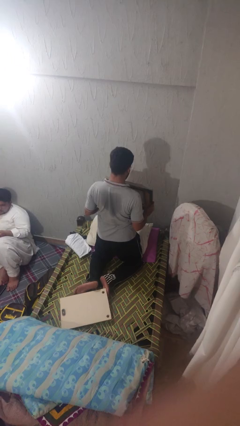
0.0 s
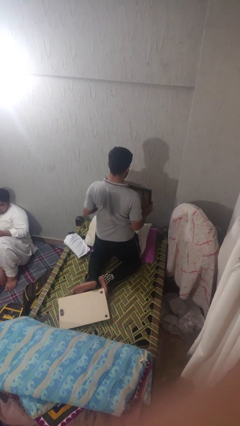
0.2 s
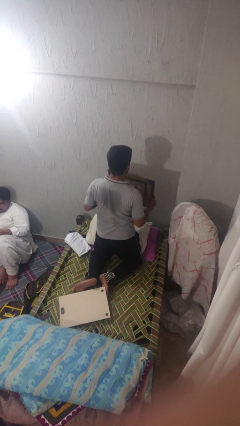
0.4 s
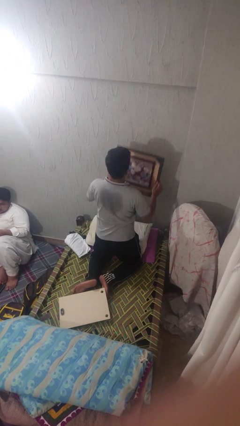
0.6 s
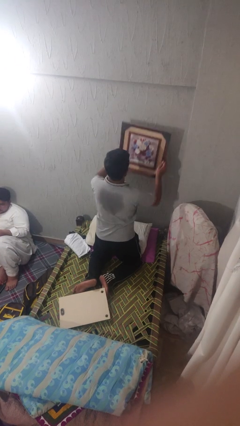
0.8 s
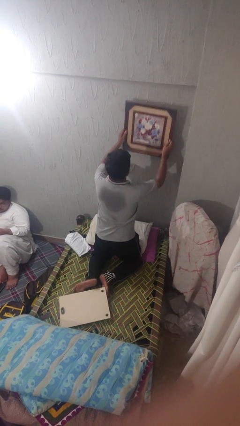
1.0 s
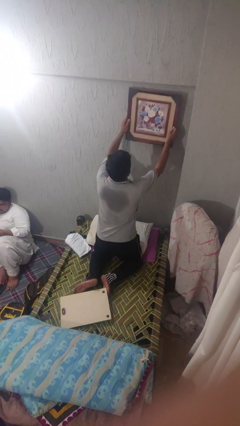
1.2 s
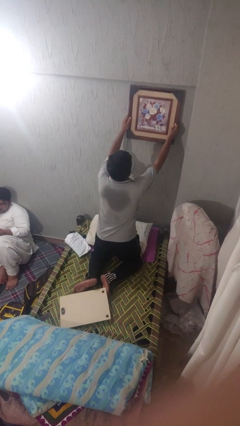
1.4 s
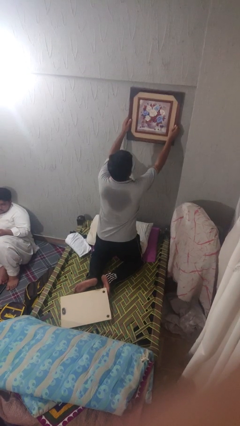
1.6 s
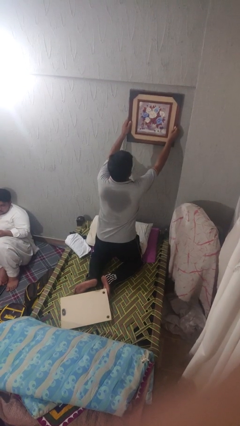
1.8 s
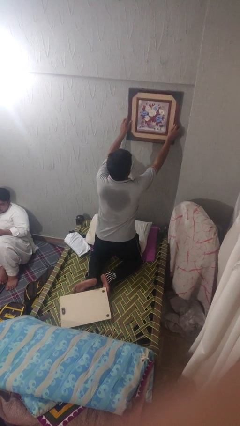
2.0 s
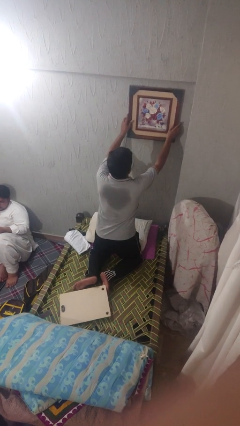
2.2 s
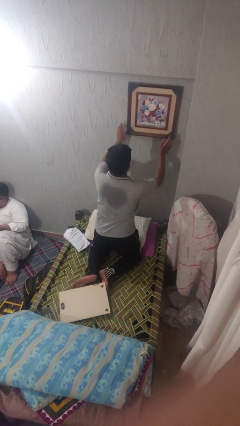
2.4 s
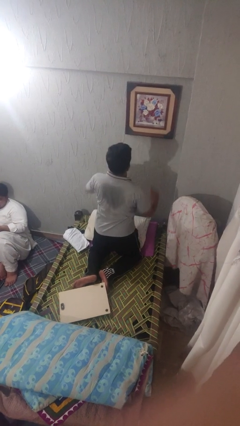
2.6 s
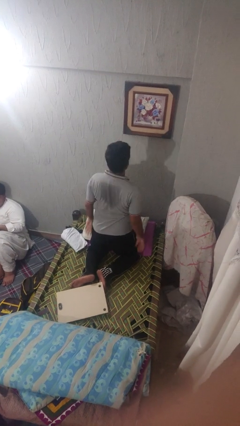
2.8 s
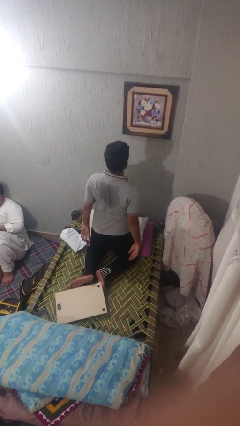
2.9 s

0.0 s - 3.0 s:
person puts up picture frame

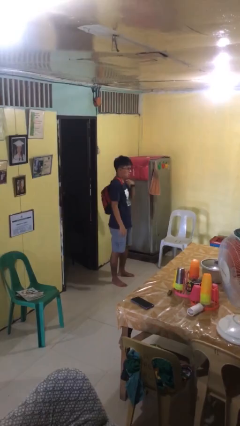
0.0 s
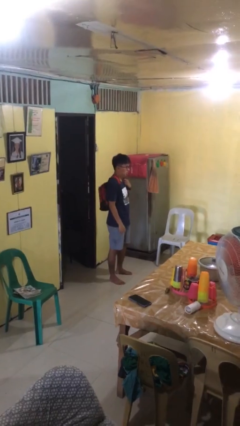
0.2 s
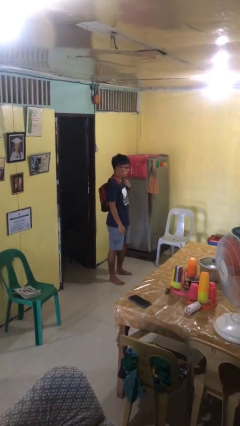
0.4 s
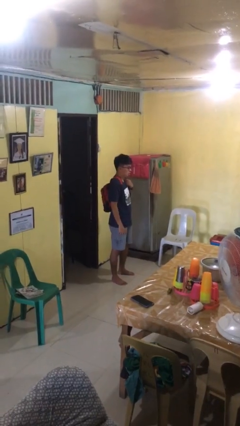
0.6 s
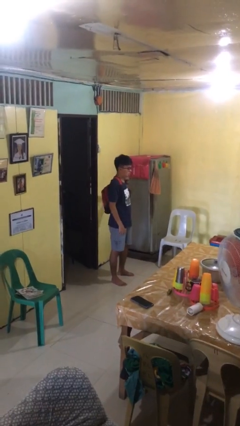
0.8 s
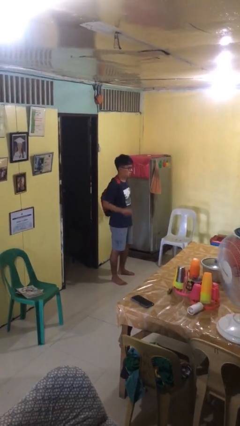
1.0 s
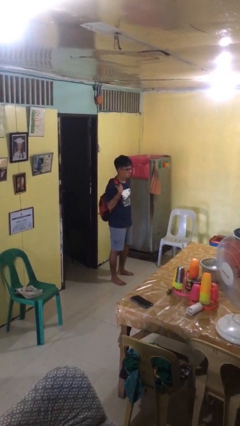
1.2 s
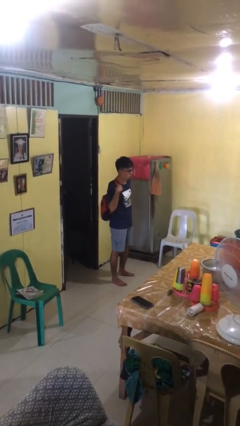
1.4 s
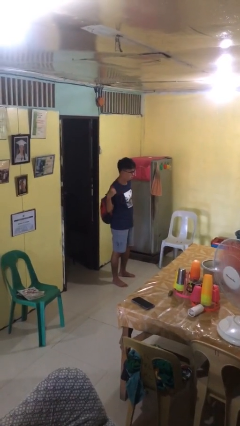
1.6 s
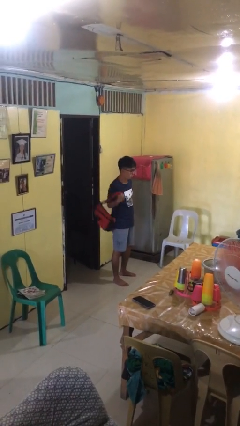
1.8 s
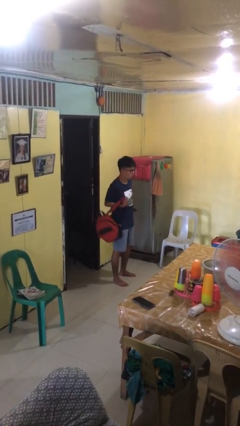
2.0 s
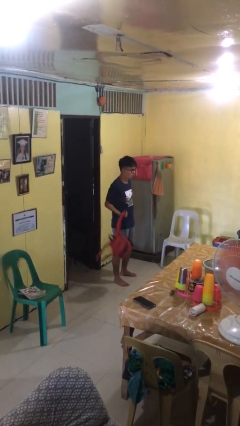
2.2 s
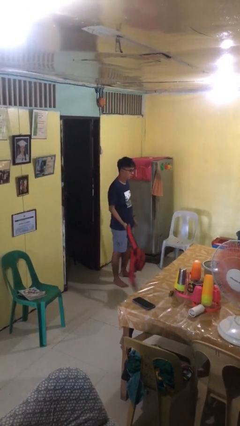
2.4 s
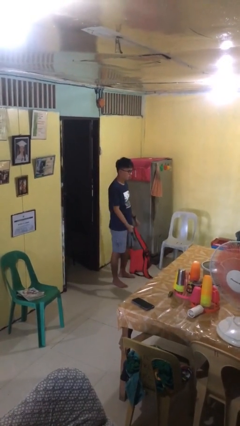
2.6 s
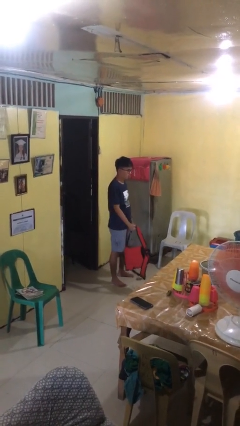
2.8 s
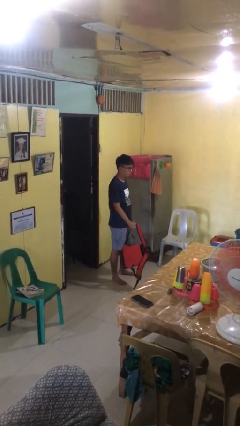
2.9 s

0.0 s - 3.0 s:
person takes off backpack

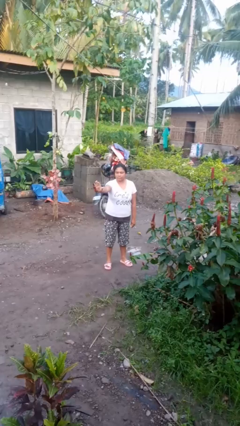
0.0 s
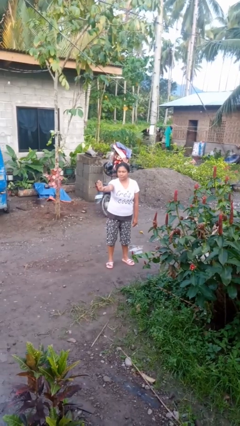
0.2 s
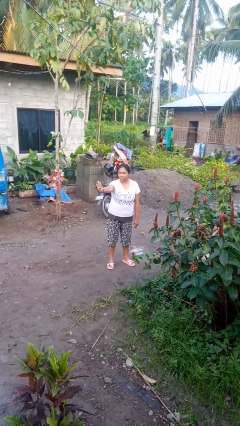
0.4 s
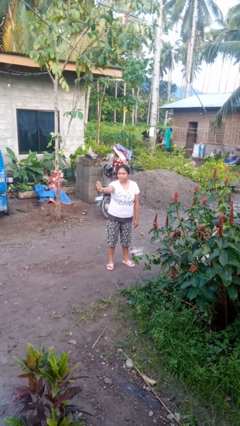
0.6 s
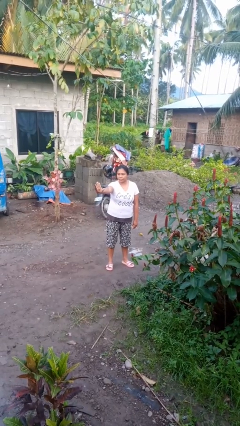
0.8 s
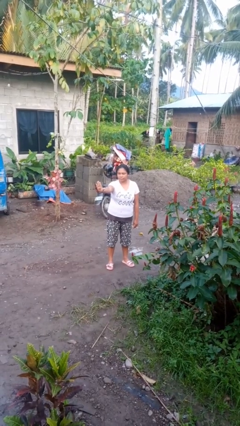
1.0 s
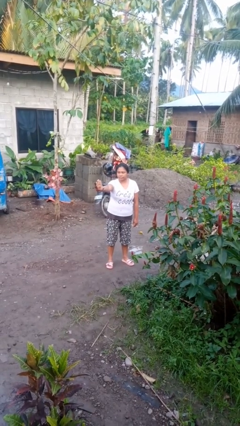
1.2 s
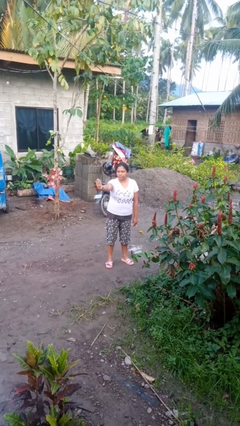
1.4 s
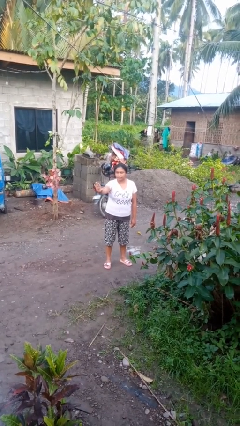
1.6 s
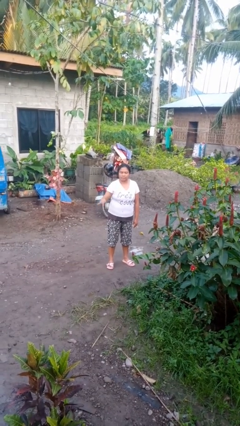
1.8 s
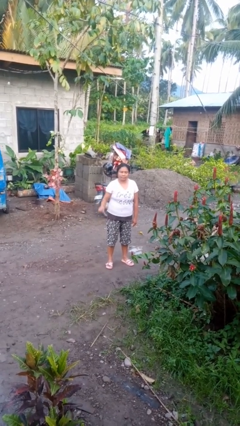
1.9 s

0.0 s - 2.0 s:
person gestures stop

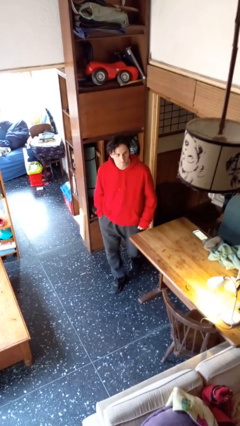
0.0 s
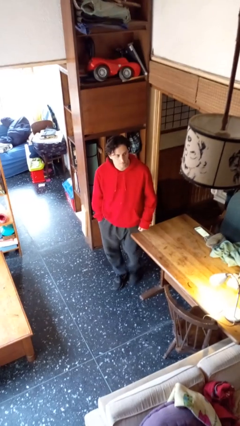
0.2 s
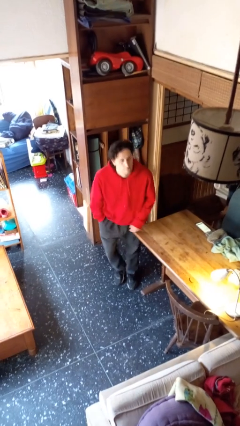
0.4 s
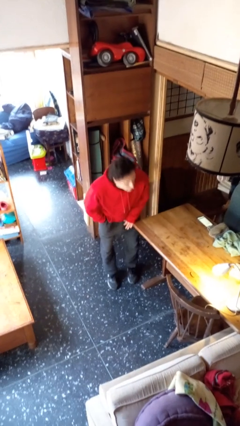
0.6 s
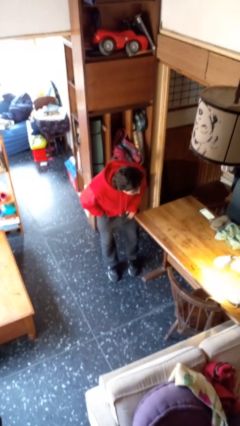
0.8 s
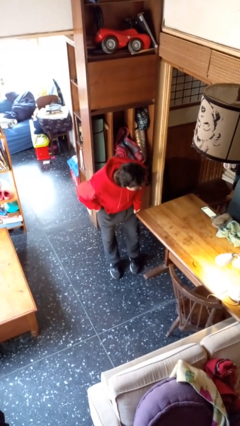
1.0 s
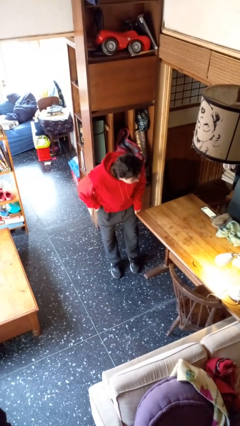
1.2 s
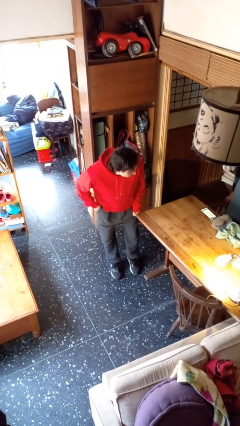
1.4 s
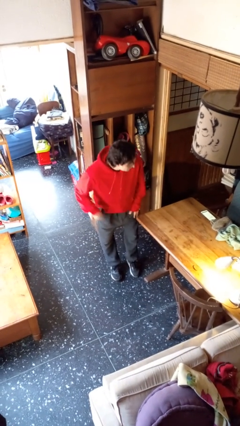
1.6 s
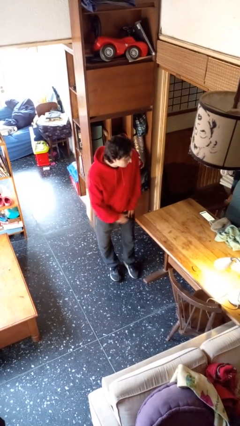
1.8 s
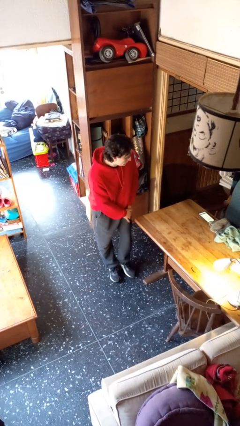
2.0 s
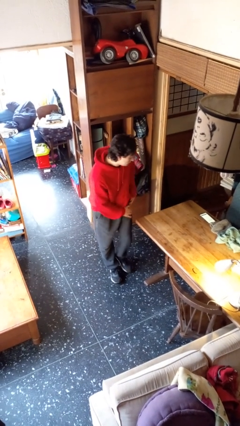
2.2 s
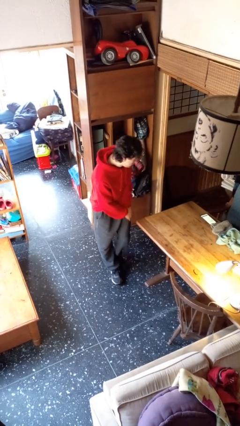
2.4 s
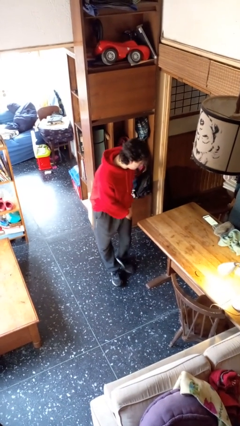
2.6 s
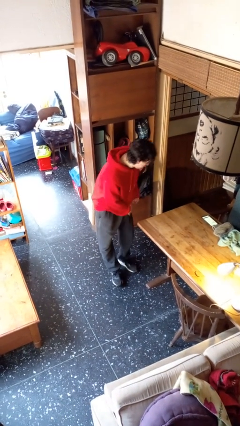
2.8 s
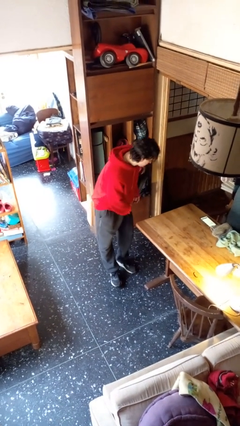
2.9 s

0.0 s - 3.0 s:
person bumps into table

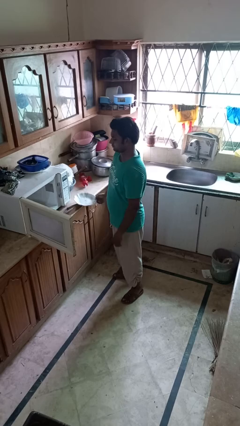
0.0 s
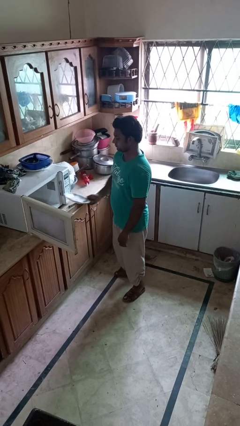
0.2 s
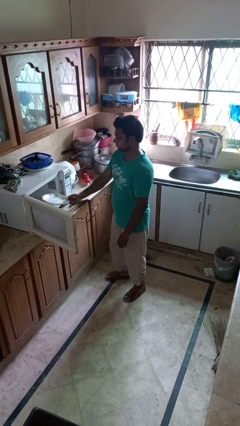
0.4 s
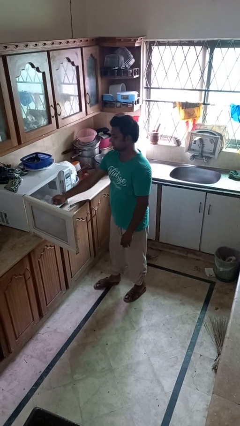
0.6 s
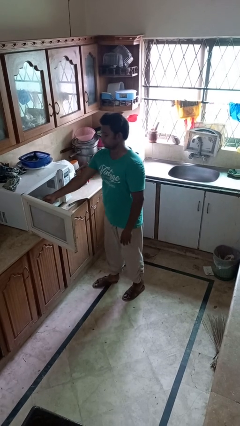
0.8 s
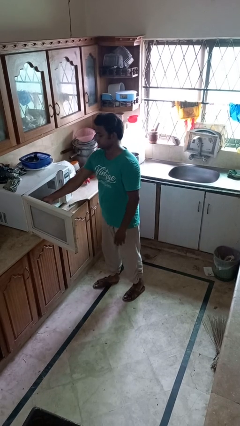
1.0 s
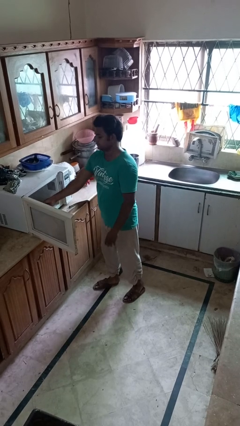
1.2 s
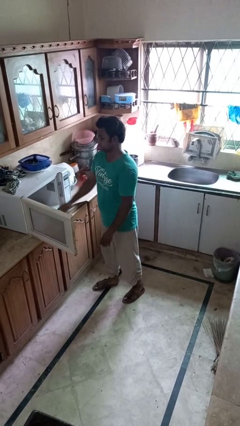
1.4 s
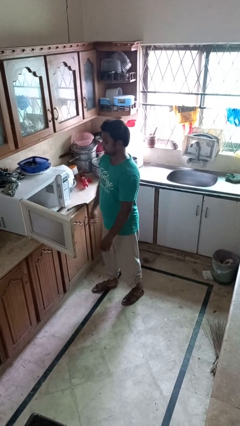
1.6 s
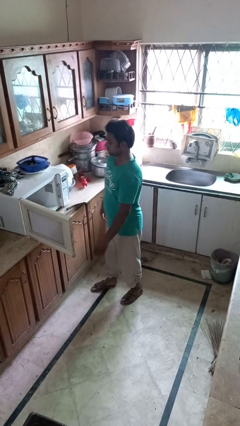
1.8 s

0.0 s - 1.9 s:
person puts object into microwave

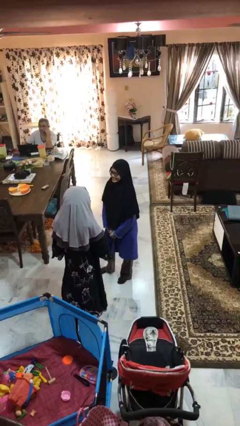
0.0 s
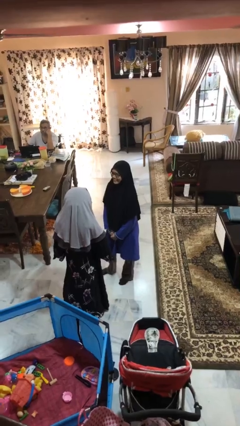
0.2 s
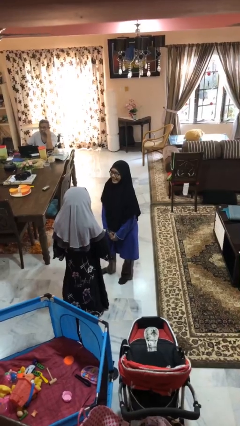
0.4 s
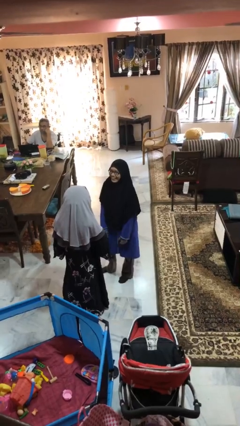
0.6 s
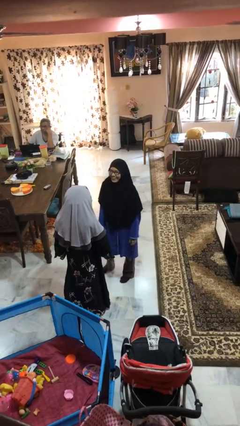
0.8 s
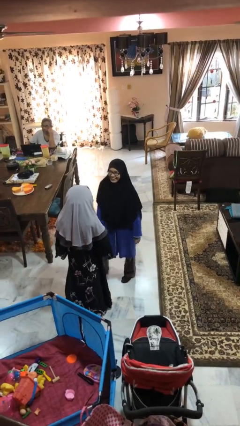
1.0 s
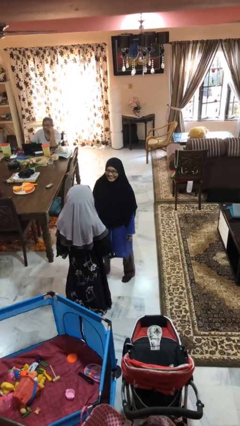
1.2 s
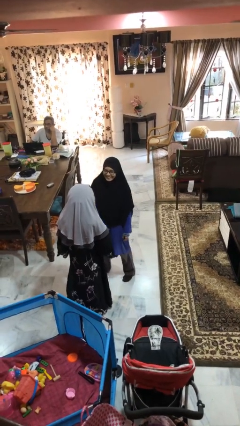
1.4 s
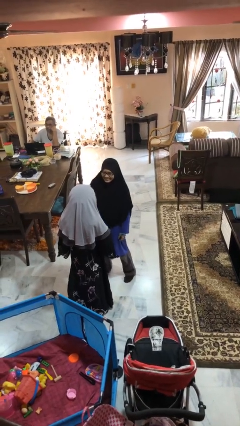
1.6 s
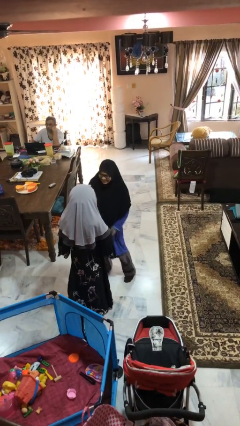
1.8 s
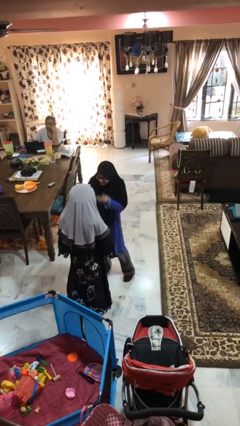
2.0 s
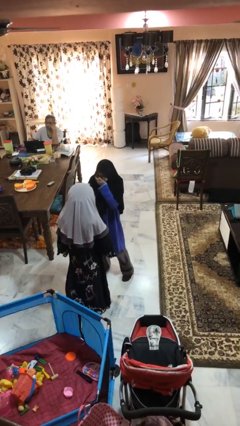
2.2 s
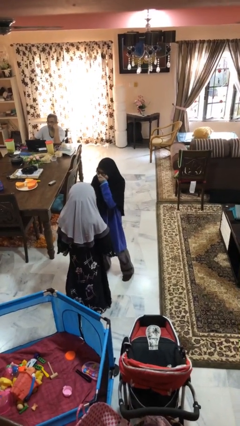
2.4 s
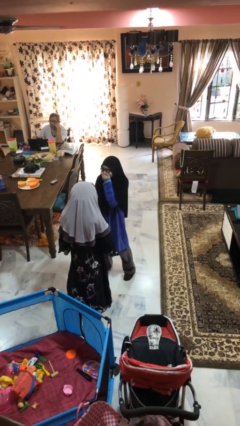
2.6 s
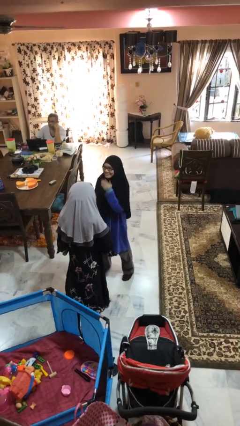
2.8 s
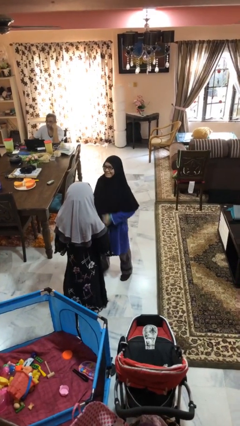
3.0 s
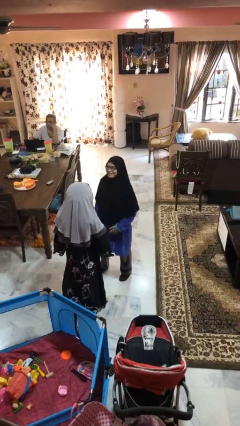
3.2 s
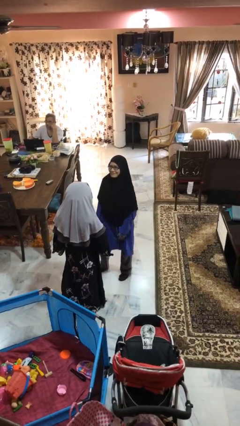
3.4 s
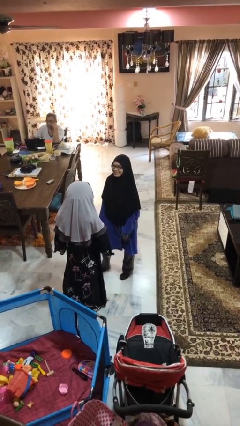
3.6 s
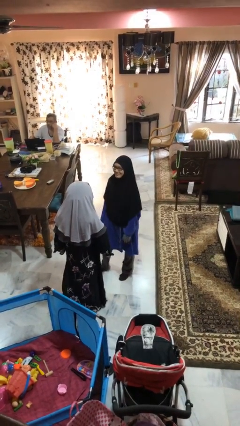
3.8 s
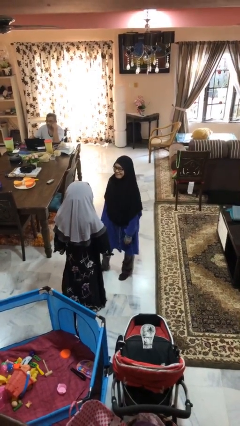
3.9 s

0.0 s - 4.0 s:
person laughs with person

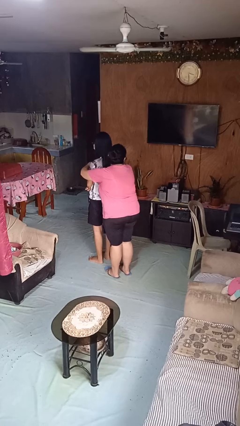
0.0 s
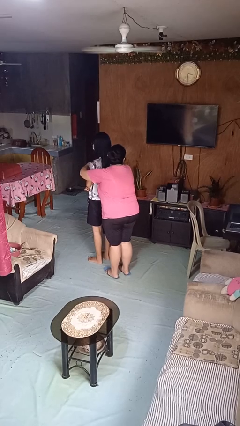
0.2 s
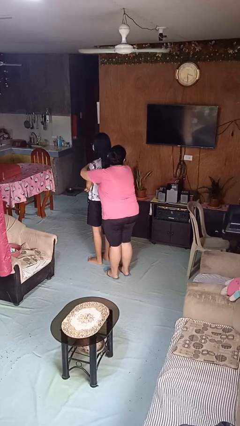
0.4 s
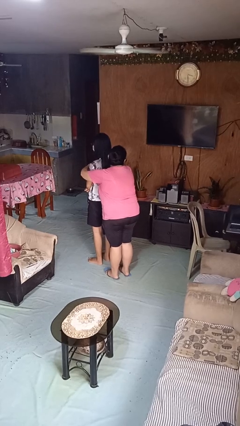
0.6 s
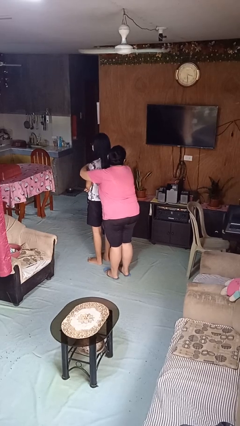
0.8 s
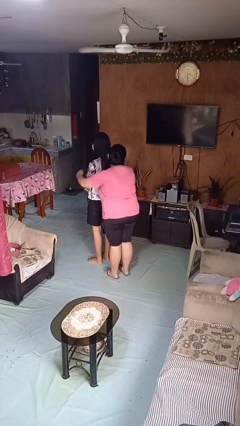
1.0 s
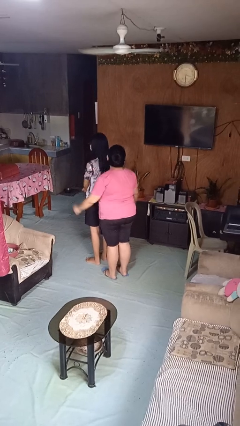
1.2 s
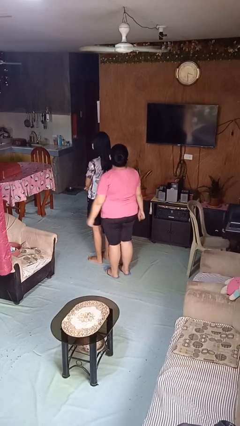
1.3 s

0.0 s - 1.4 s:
person hugs person from behind
